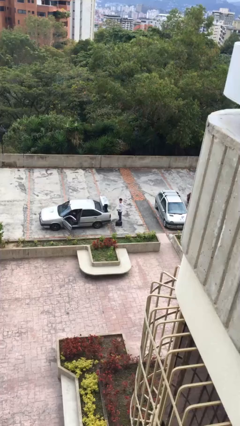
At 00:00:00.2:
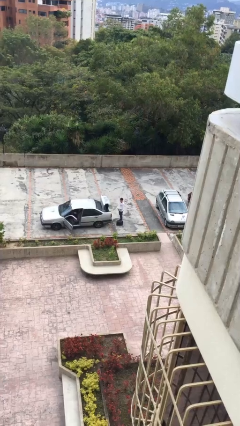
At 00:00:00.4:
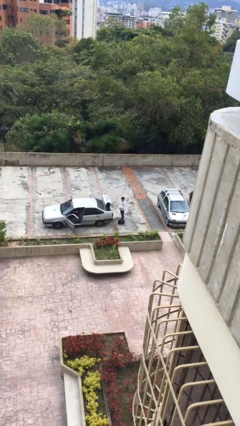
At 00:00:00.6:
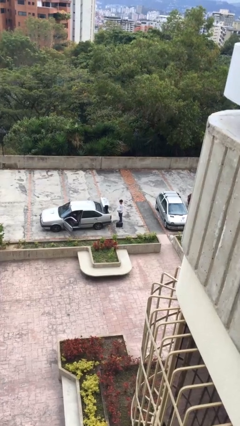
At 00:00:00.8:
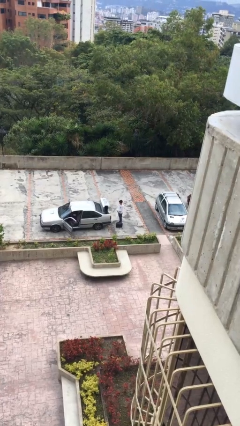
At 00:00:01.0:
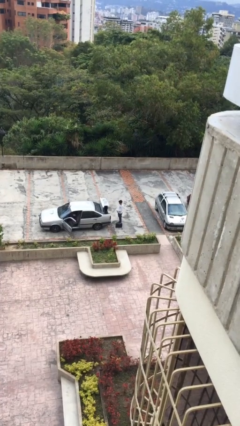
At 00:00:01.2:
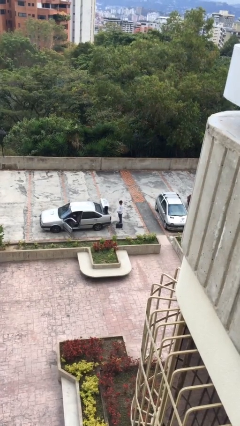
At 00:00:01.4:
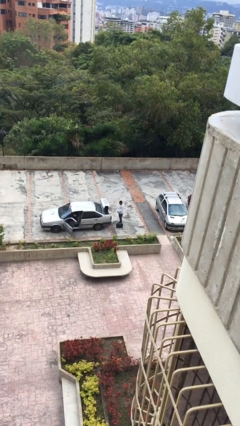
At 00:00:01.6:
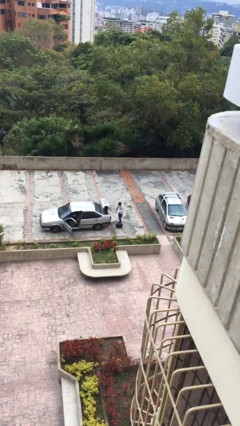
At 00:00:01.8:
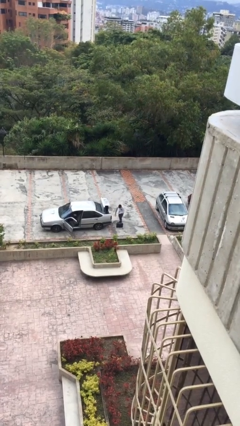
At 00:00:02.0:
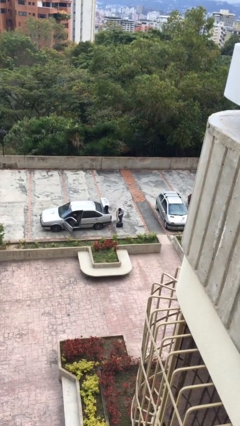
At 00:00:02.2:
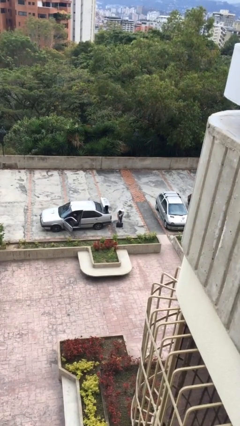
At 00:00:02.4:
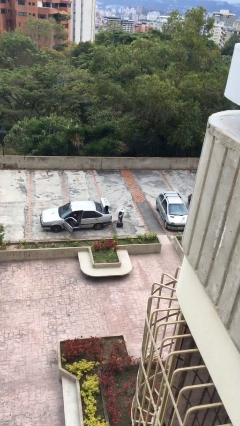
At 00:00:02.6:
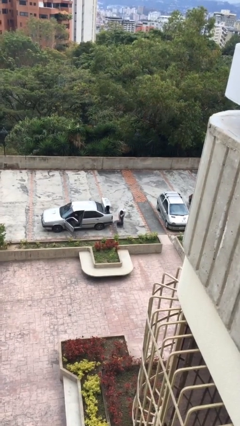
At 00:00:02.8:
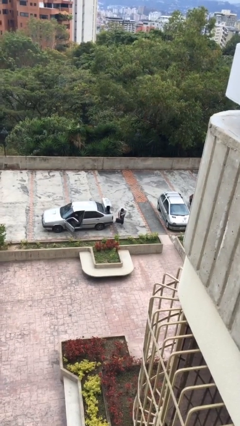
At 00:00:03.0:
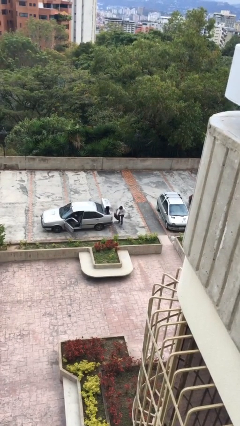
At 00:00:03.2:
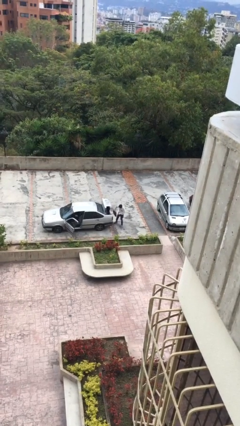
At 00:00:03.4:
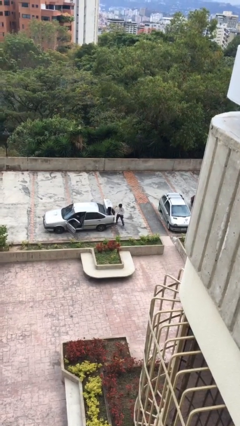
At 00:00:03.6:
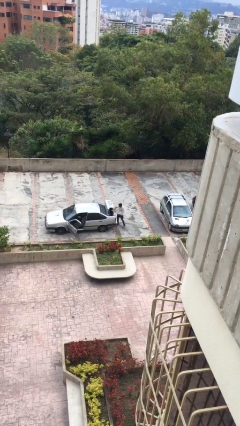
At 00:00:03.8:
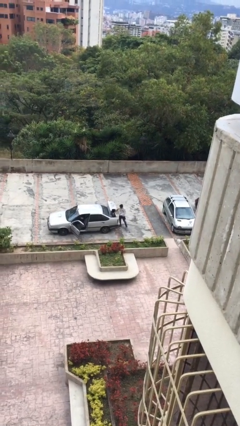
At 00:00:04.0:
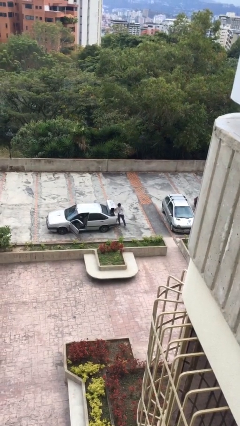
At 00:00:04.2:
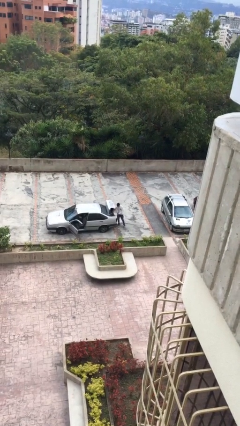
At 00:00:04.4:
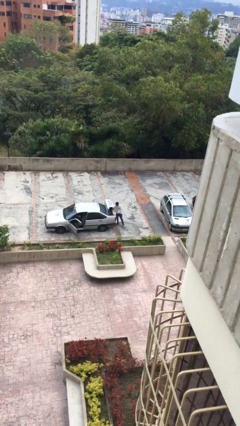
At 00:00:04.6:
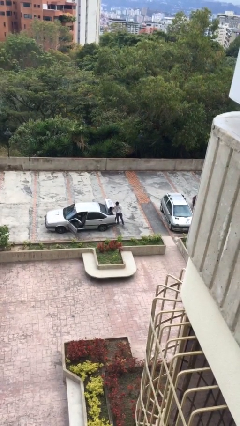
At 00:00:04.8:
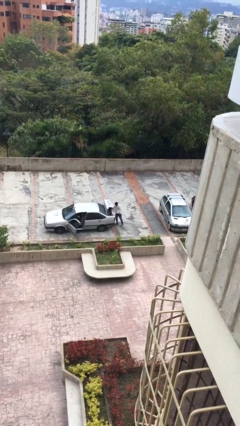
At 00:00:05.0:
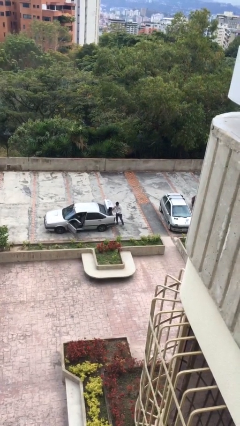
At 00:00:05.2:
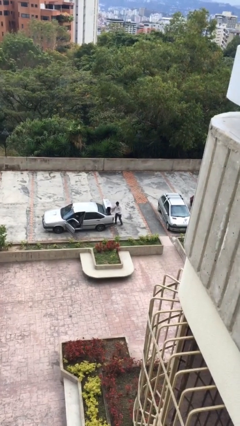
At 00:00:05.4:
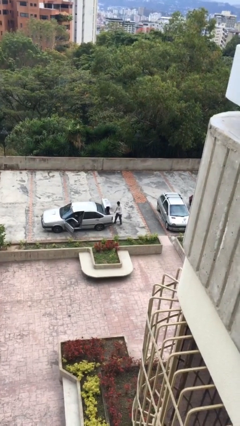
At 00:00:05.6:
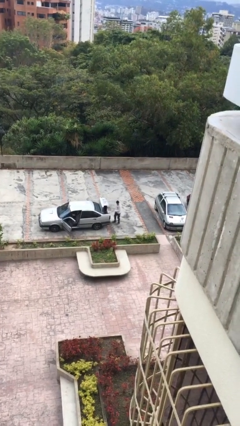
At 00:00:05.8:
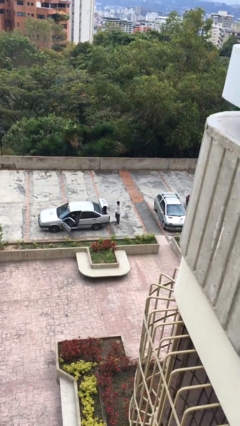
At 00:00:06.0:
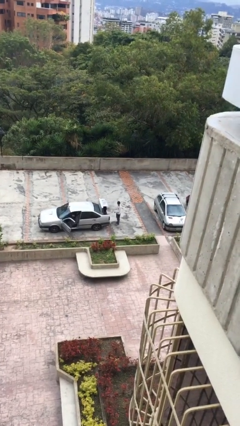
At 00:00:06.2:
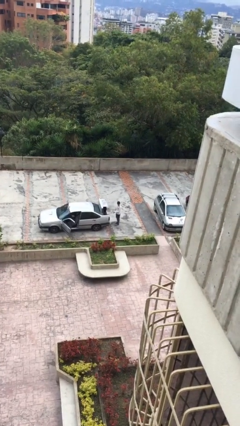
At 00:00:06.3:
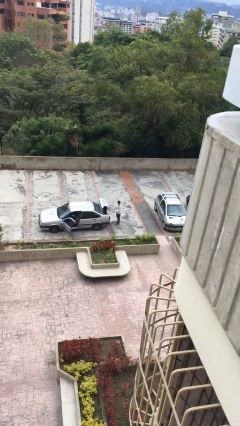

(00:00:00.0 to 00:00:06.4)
person loads car

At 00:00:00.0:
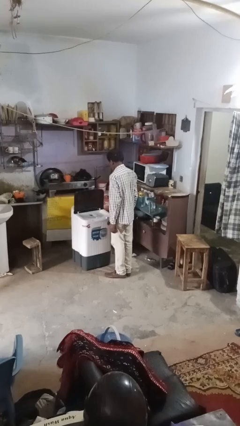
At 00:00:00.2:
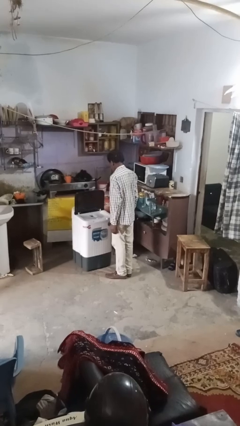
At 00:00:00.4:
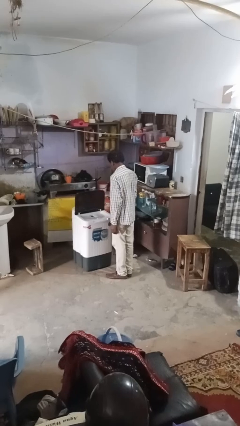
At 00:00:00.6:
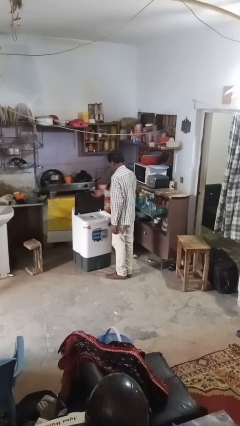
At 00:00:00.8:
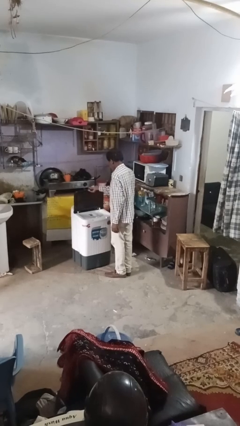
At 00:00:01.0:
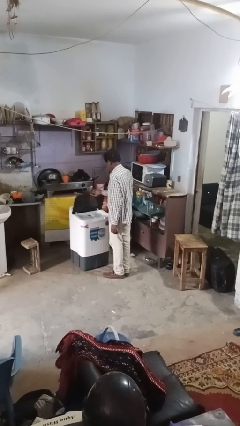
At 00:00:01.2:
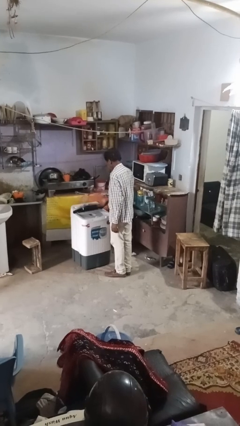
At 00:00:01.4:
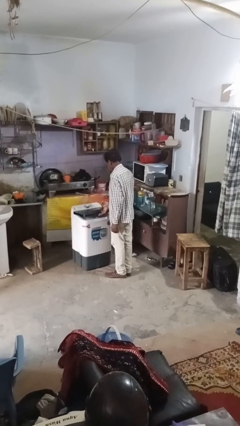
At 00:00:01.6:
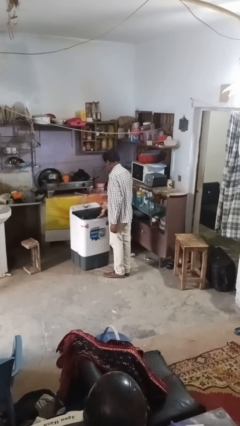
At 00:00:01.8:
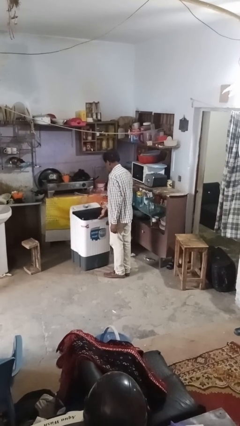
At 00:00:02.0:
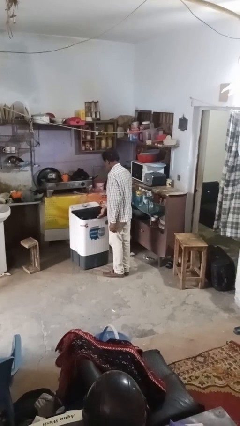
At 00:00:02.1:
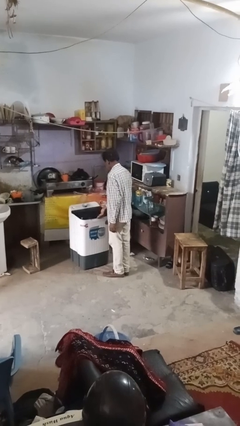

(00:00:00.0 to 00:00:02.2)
person closes clothes washer

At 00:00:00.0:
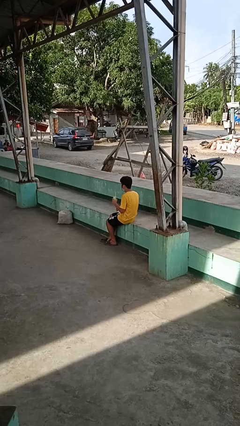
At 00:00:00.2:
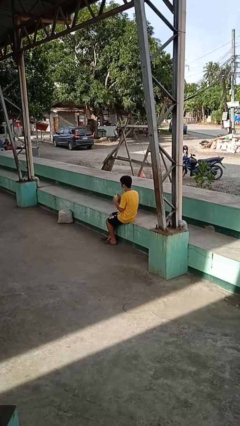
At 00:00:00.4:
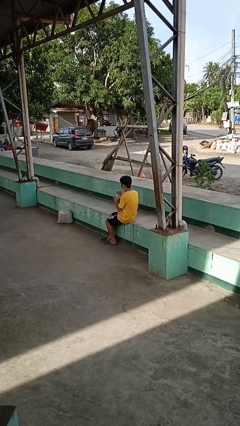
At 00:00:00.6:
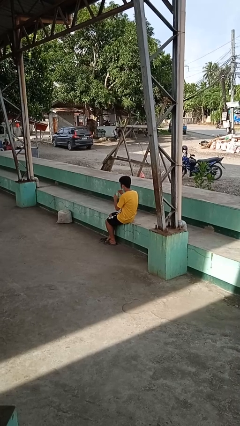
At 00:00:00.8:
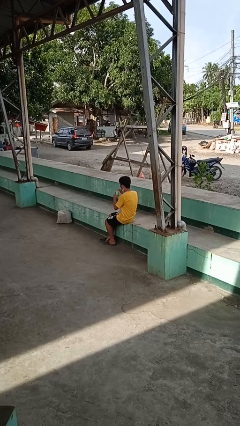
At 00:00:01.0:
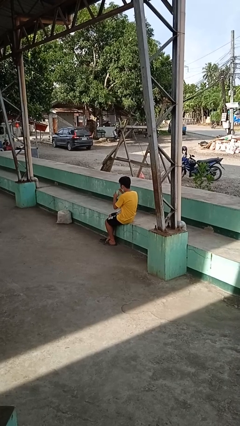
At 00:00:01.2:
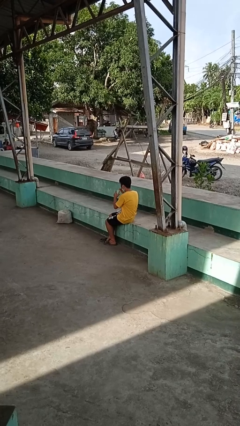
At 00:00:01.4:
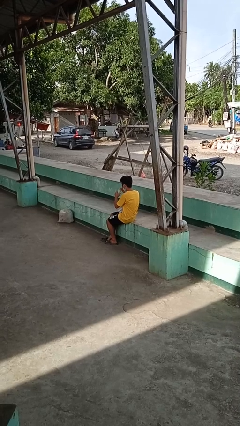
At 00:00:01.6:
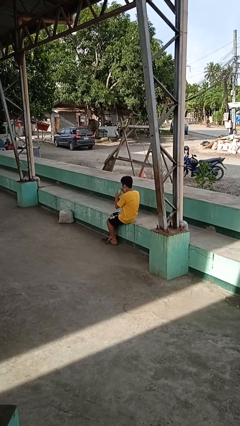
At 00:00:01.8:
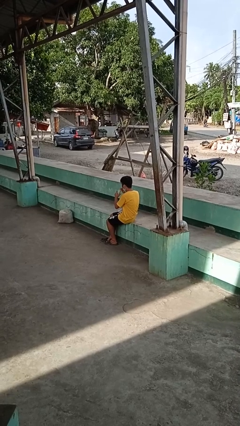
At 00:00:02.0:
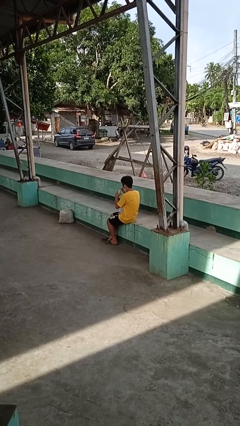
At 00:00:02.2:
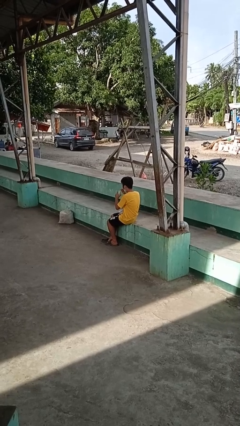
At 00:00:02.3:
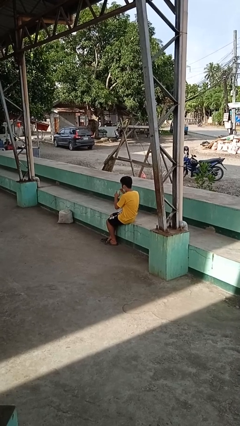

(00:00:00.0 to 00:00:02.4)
person drinks from straw

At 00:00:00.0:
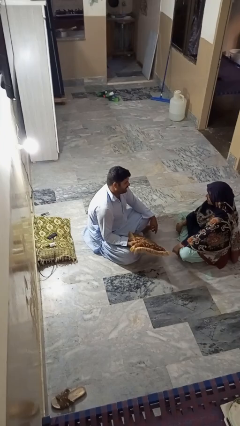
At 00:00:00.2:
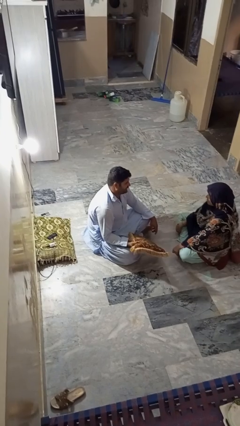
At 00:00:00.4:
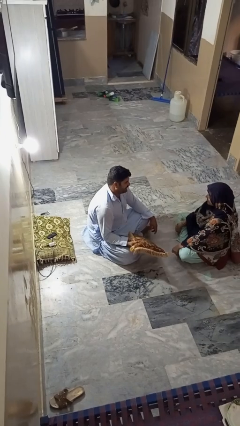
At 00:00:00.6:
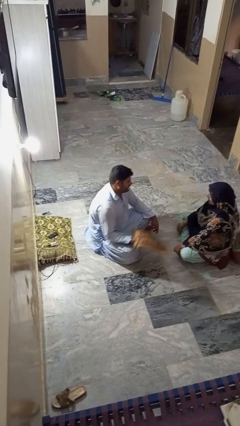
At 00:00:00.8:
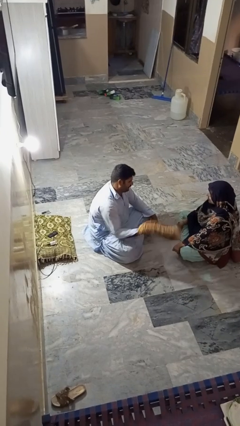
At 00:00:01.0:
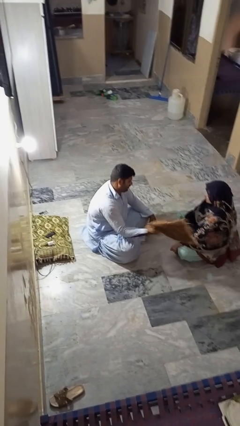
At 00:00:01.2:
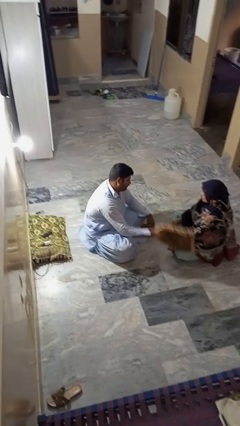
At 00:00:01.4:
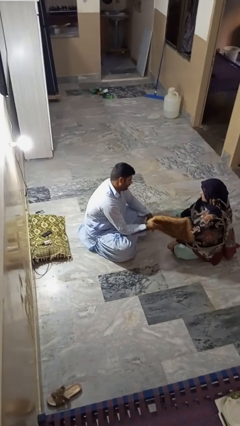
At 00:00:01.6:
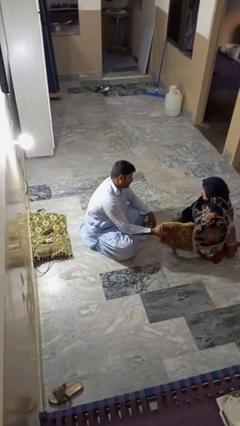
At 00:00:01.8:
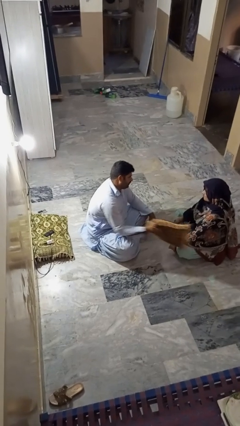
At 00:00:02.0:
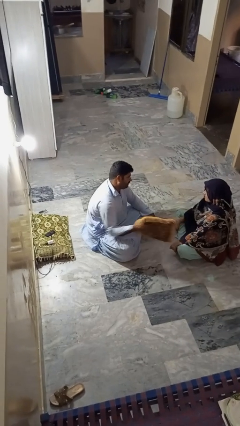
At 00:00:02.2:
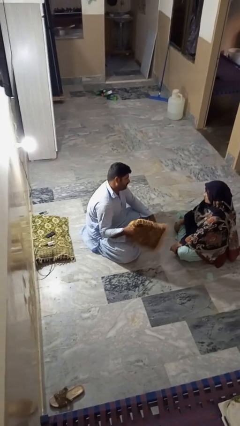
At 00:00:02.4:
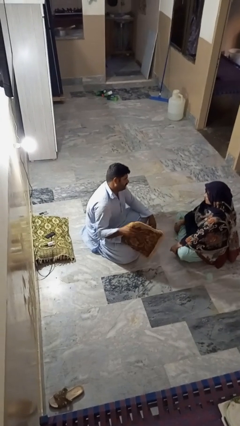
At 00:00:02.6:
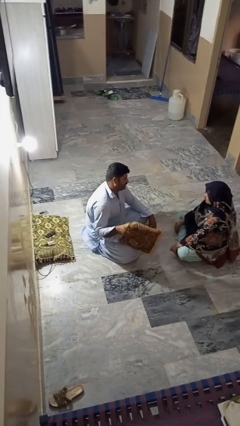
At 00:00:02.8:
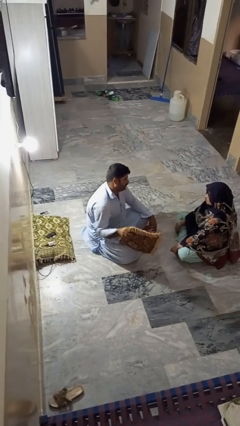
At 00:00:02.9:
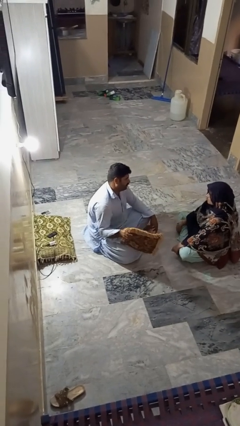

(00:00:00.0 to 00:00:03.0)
person hits person with pillow

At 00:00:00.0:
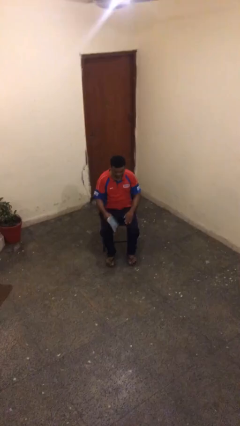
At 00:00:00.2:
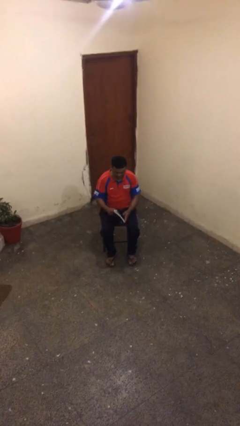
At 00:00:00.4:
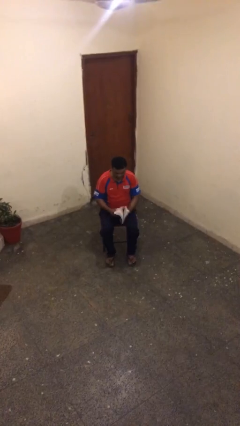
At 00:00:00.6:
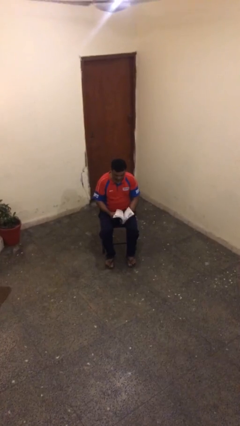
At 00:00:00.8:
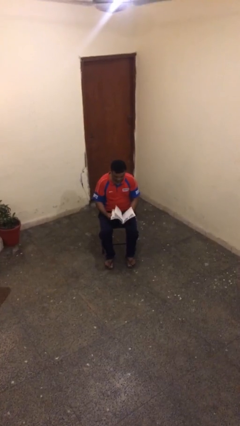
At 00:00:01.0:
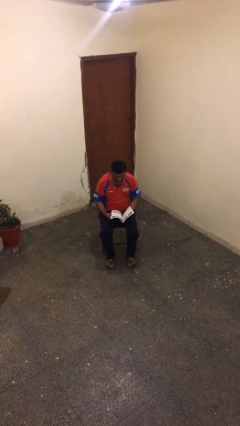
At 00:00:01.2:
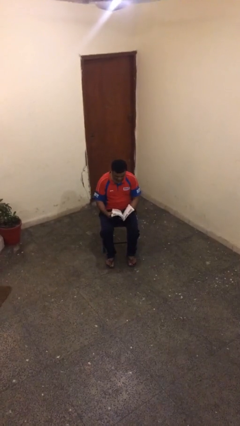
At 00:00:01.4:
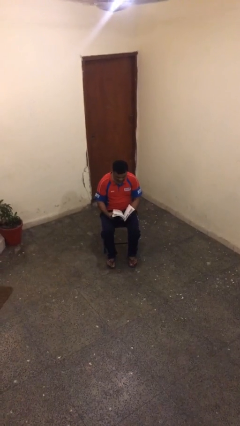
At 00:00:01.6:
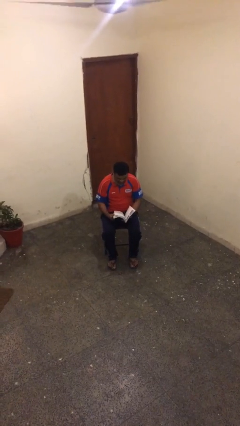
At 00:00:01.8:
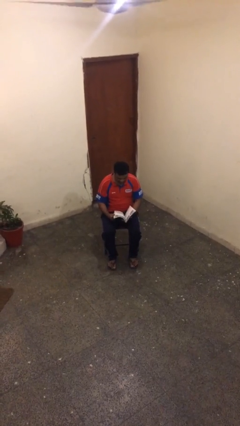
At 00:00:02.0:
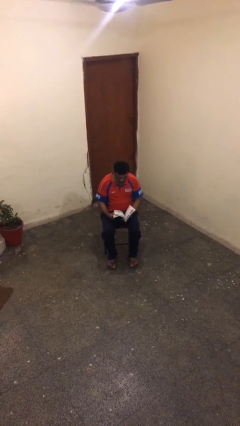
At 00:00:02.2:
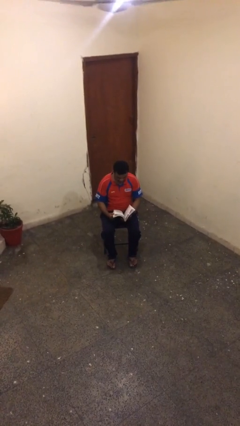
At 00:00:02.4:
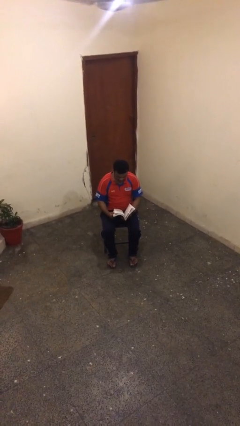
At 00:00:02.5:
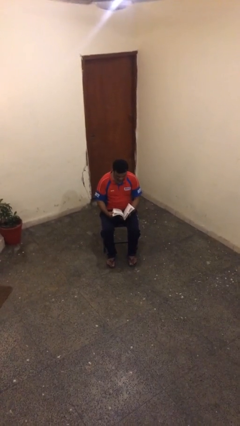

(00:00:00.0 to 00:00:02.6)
person reads document

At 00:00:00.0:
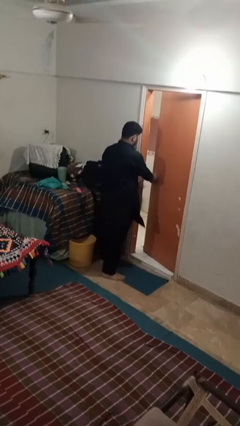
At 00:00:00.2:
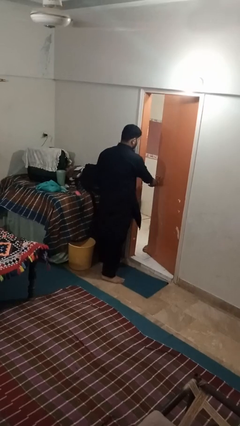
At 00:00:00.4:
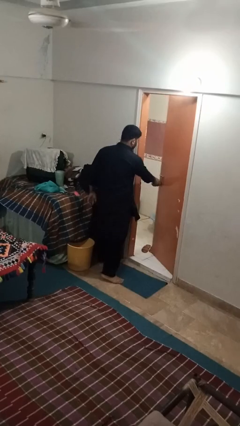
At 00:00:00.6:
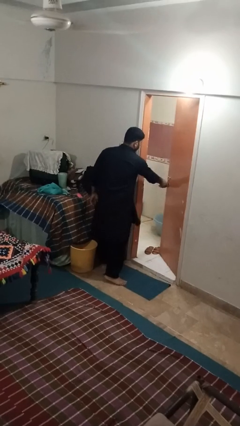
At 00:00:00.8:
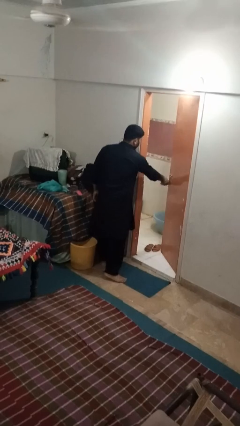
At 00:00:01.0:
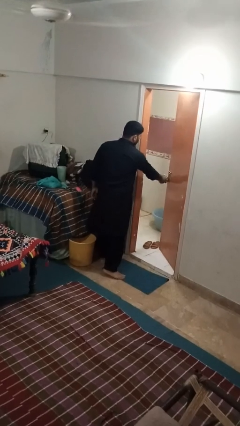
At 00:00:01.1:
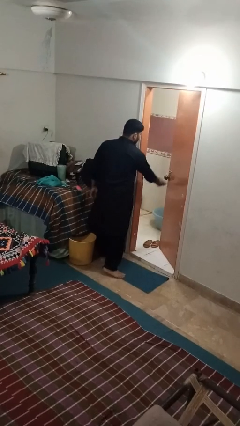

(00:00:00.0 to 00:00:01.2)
person opens facility door
